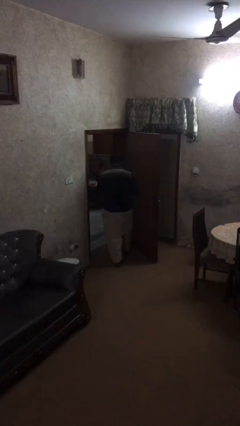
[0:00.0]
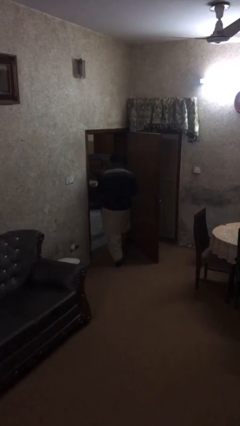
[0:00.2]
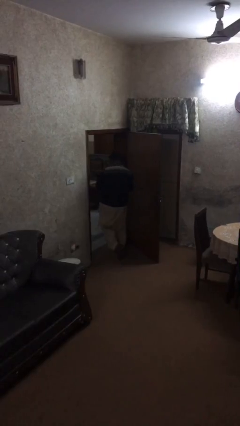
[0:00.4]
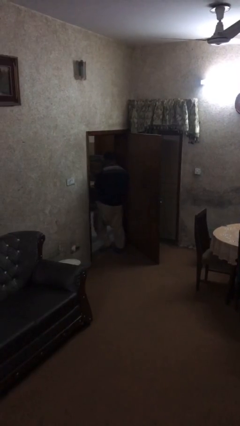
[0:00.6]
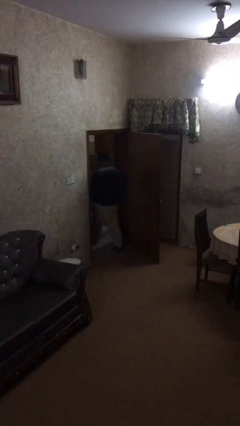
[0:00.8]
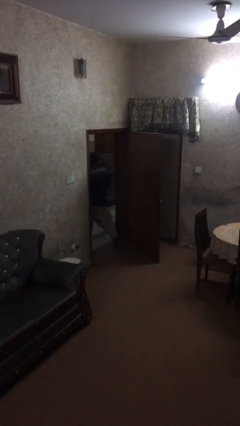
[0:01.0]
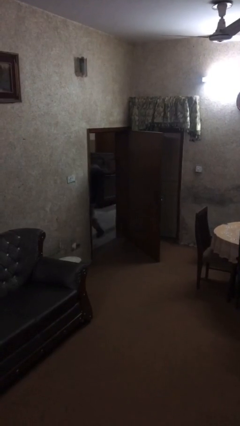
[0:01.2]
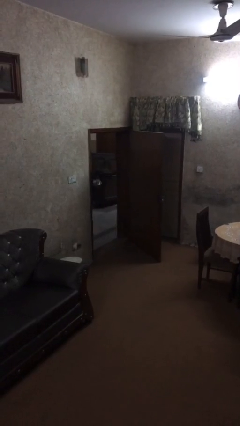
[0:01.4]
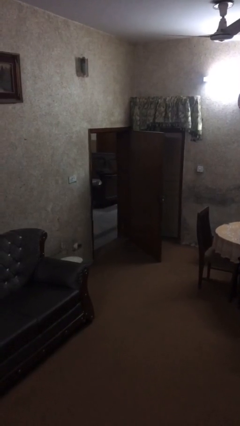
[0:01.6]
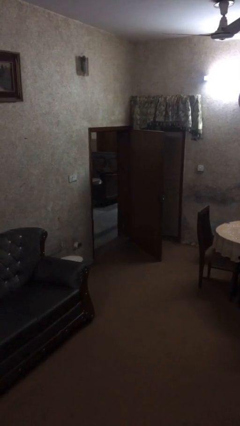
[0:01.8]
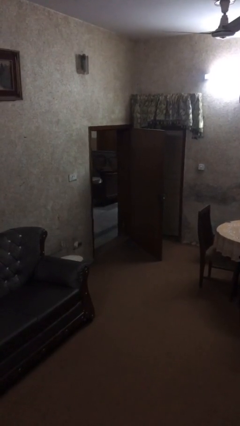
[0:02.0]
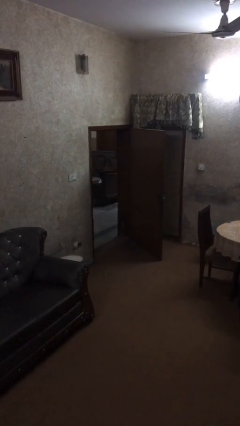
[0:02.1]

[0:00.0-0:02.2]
person exits scene through structure

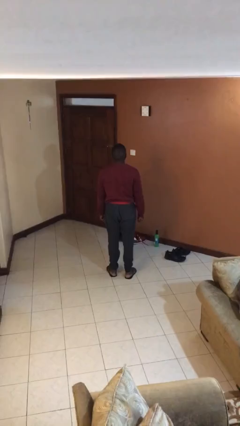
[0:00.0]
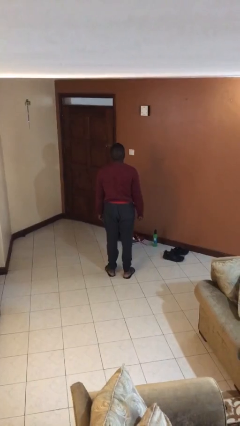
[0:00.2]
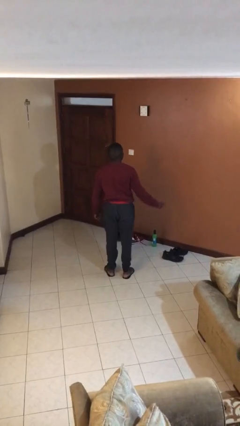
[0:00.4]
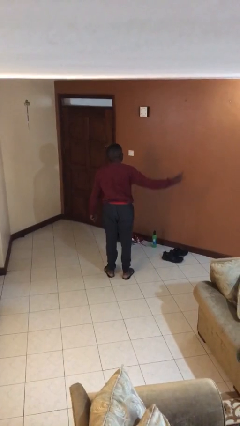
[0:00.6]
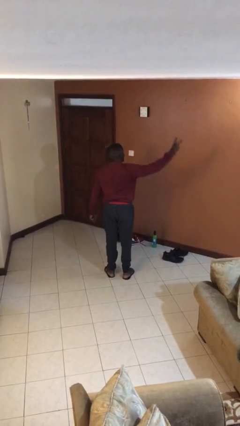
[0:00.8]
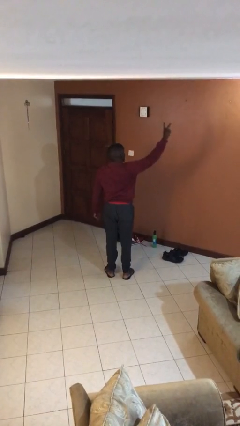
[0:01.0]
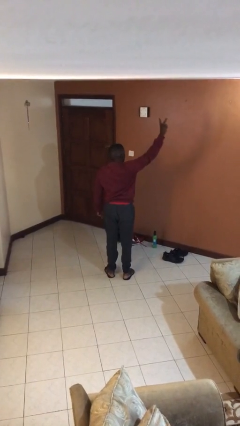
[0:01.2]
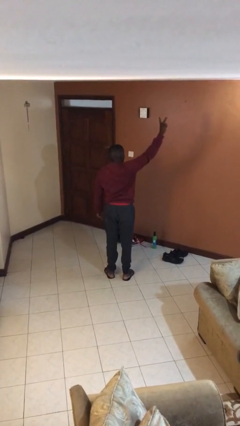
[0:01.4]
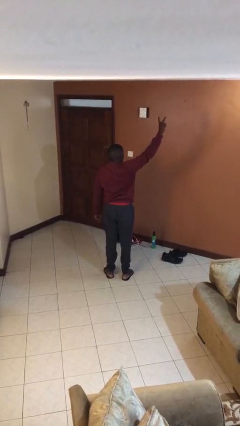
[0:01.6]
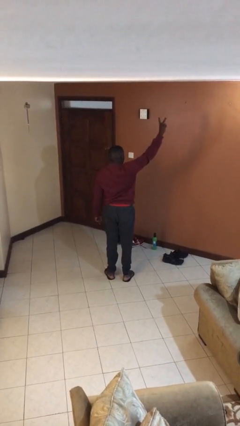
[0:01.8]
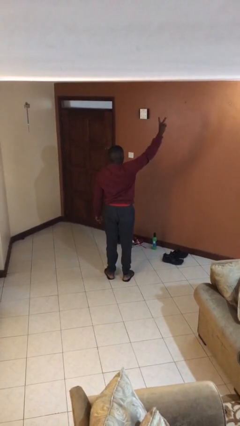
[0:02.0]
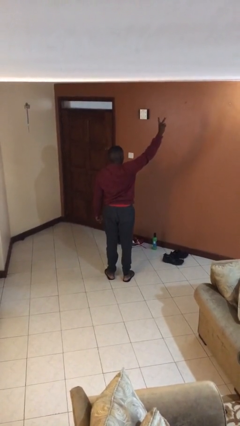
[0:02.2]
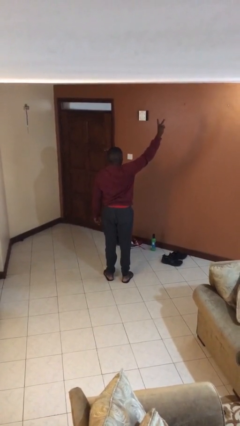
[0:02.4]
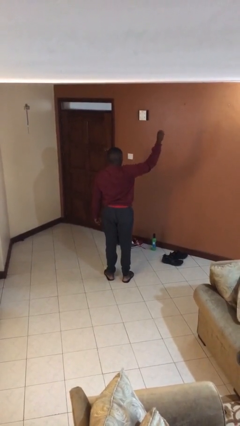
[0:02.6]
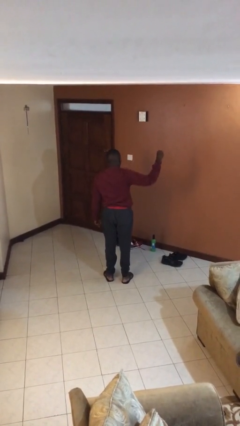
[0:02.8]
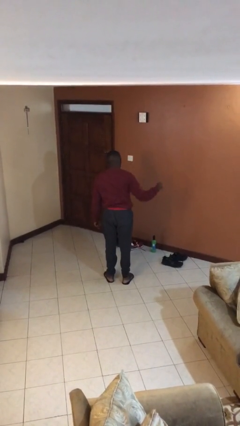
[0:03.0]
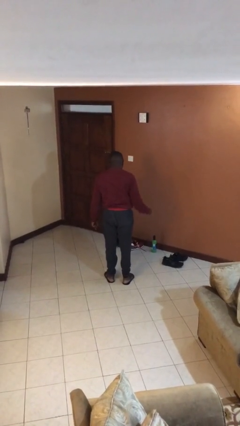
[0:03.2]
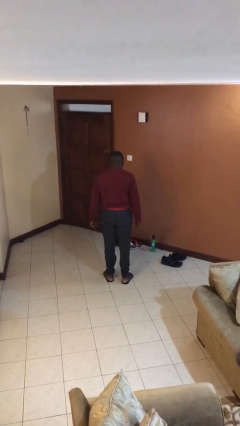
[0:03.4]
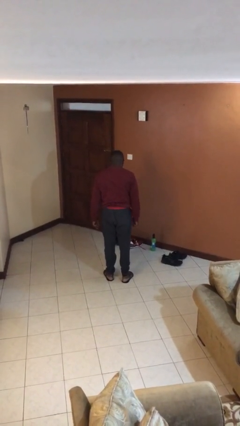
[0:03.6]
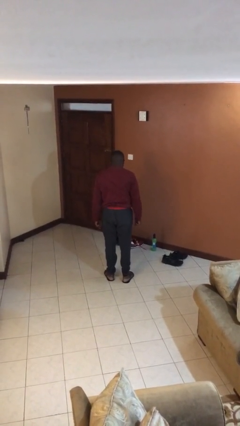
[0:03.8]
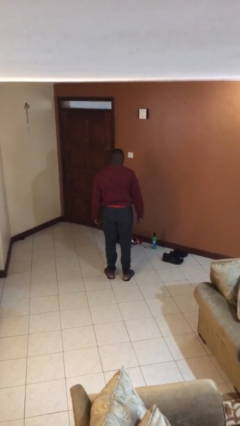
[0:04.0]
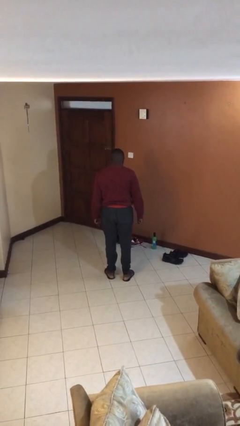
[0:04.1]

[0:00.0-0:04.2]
person gestures peace

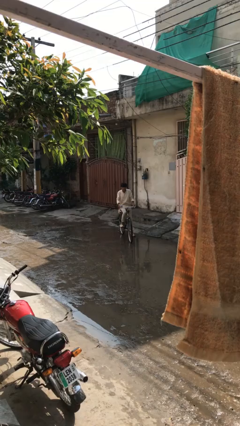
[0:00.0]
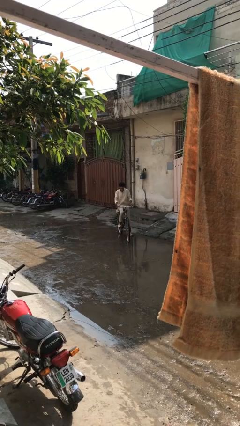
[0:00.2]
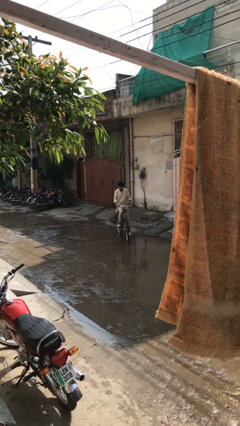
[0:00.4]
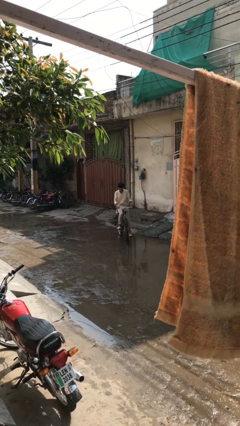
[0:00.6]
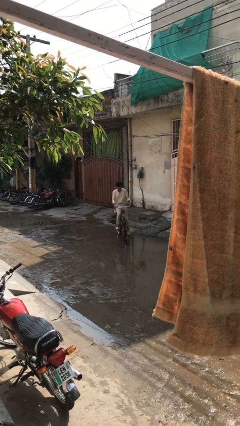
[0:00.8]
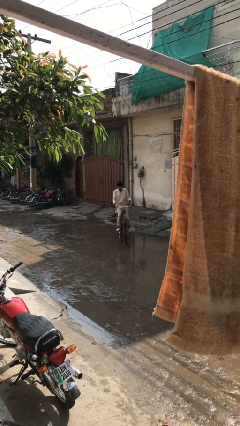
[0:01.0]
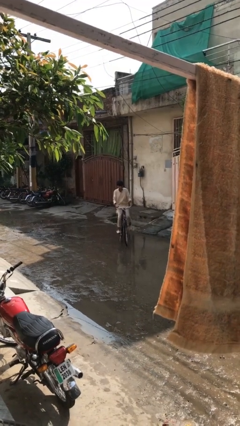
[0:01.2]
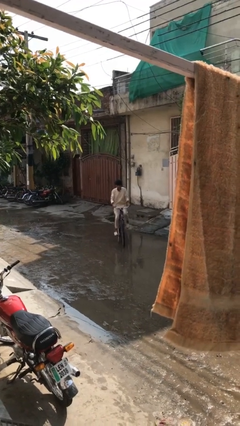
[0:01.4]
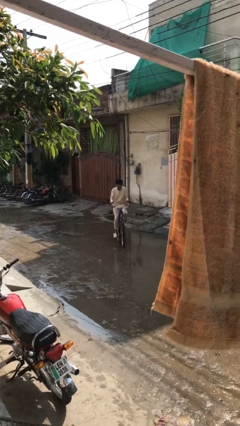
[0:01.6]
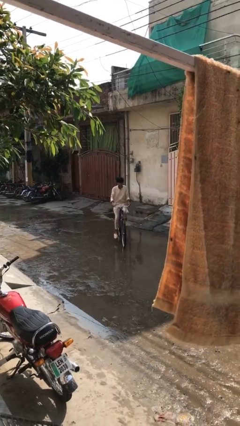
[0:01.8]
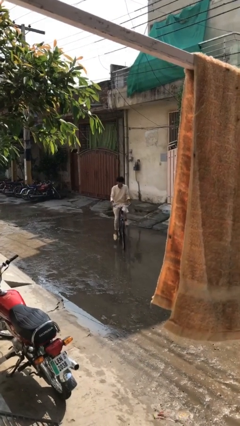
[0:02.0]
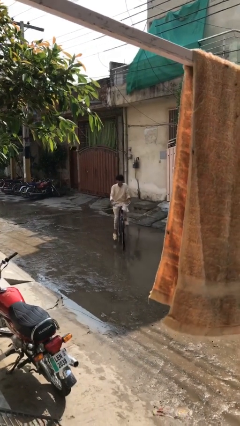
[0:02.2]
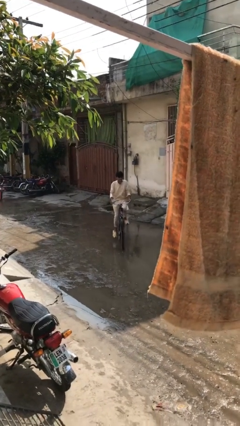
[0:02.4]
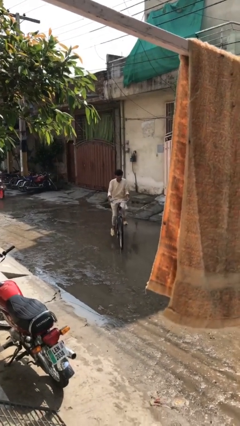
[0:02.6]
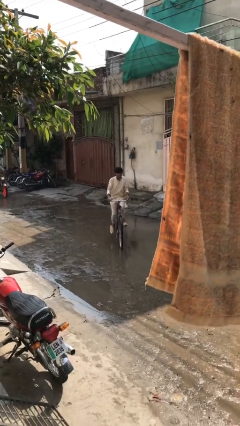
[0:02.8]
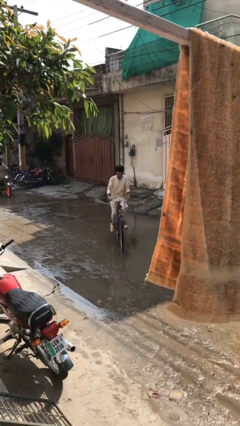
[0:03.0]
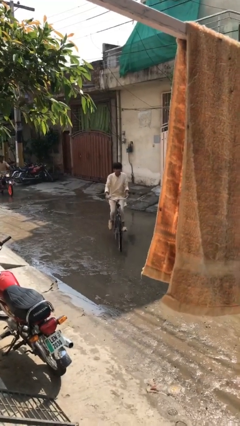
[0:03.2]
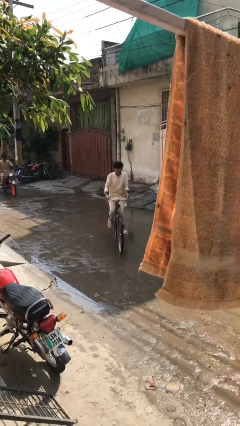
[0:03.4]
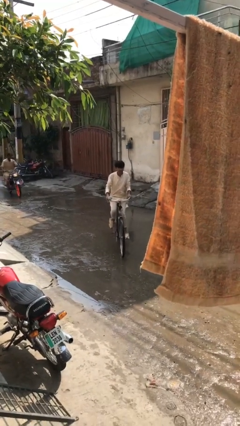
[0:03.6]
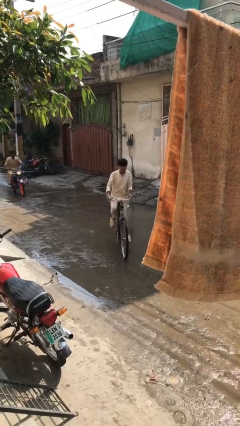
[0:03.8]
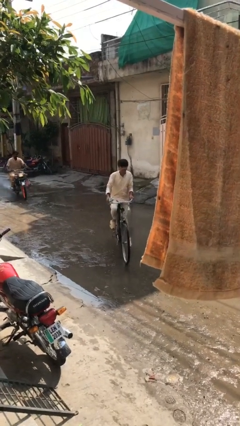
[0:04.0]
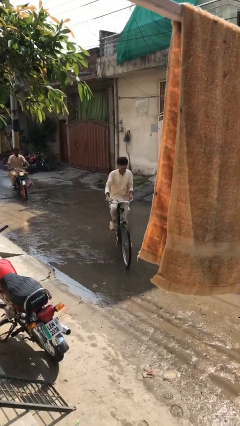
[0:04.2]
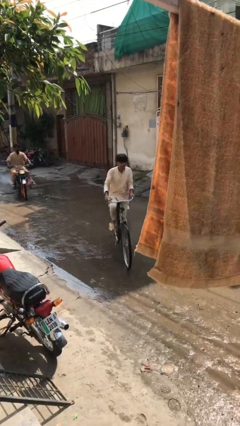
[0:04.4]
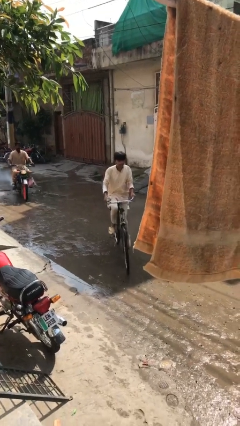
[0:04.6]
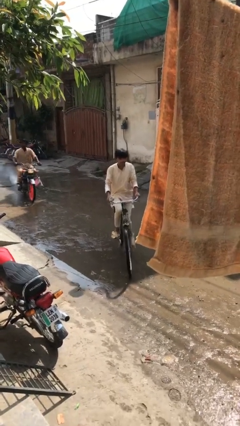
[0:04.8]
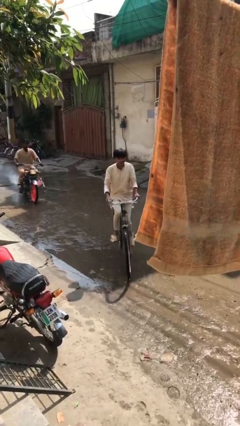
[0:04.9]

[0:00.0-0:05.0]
person rides bicycle

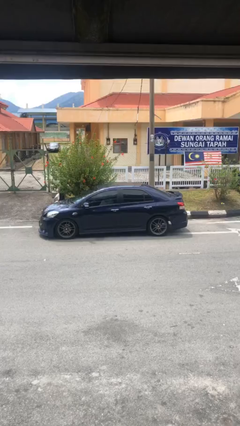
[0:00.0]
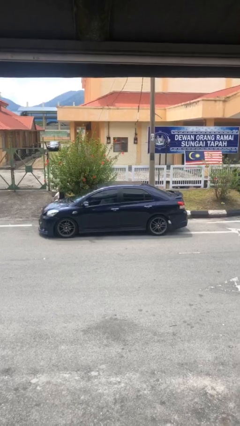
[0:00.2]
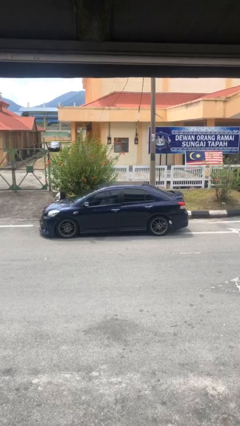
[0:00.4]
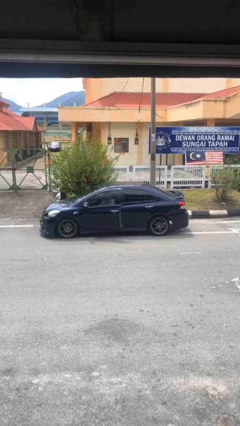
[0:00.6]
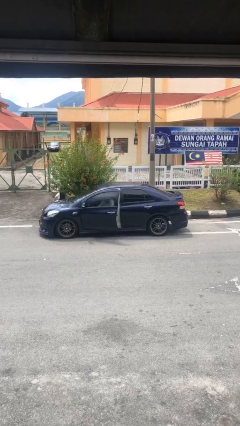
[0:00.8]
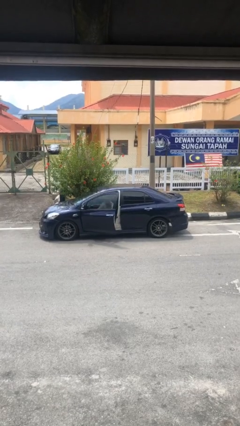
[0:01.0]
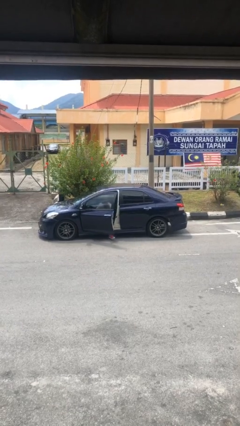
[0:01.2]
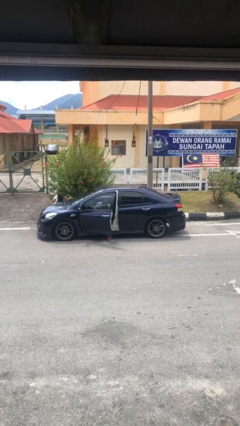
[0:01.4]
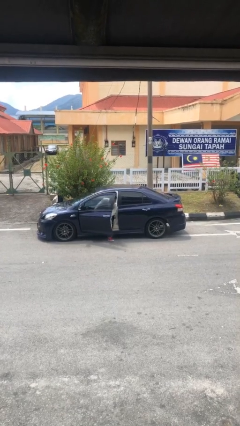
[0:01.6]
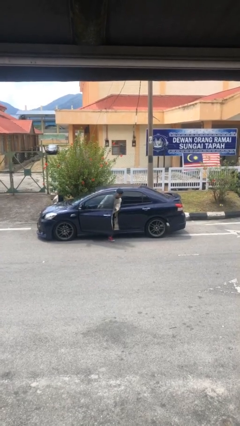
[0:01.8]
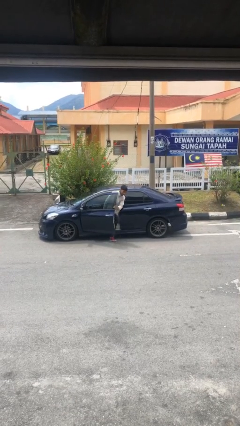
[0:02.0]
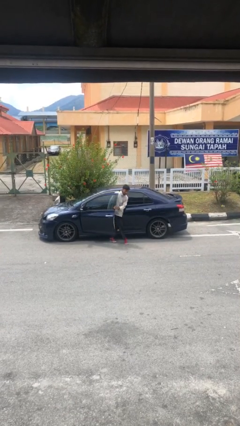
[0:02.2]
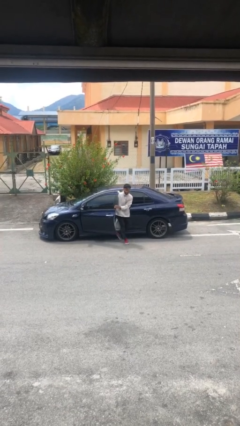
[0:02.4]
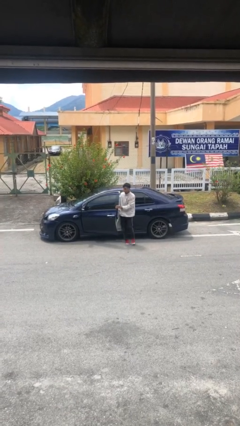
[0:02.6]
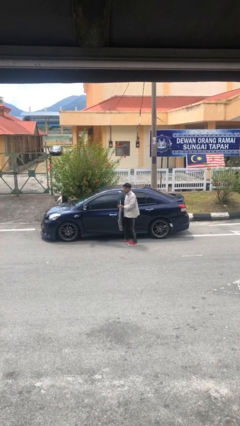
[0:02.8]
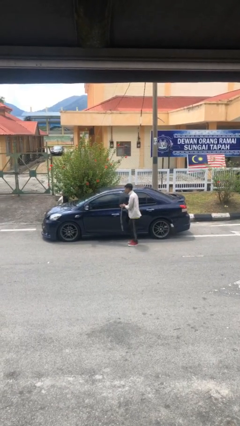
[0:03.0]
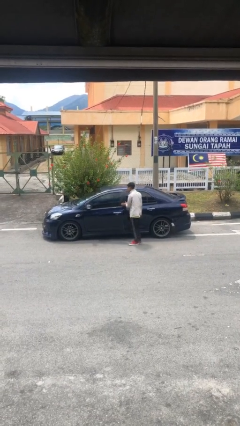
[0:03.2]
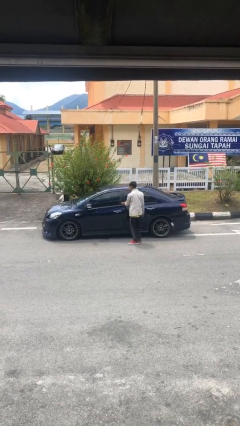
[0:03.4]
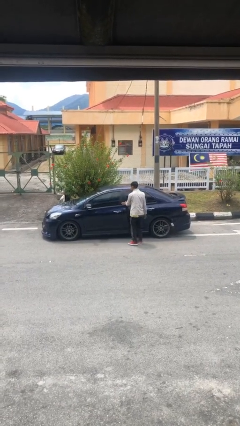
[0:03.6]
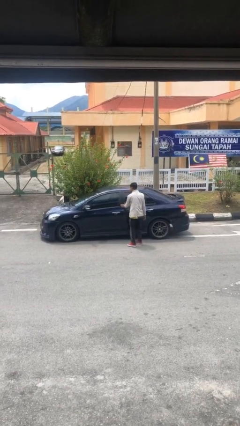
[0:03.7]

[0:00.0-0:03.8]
car drops off person

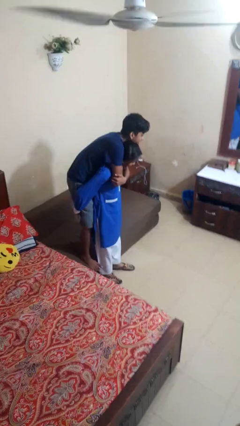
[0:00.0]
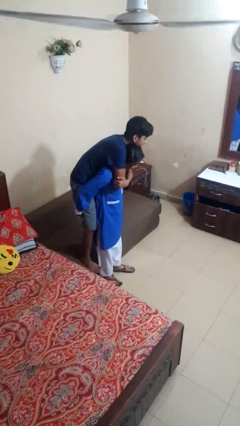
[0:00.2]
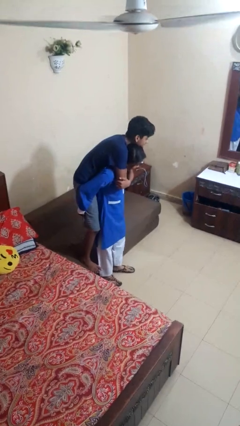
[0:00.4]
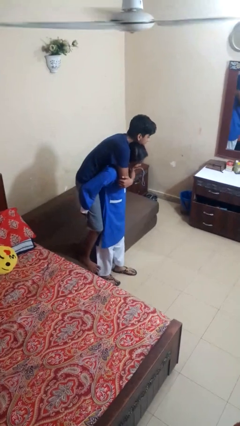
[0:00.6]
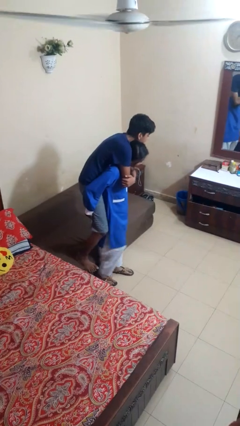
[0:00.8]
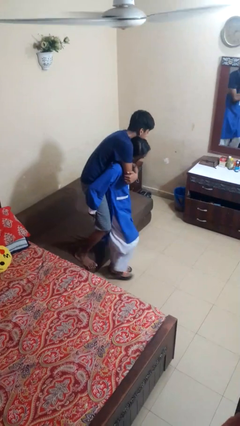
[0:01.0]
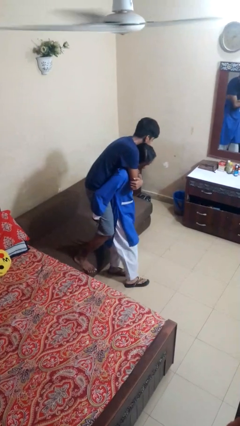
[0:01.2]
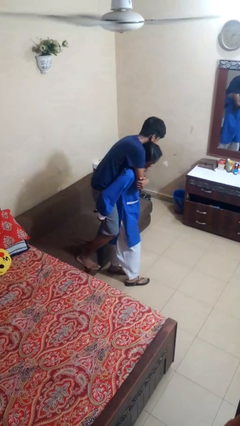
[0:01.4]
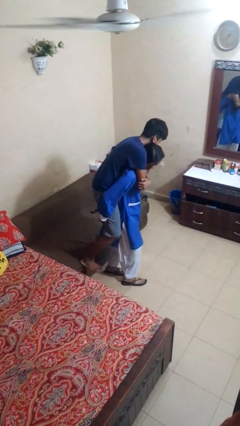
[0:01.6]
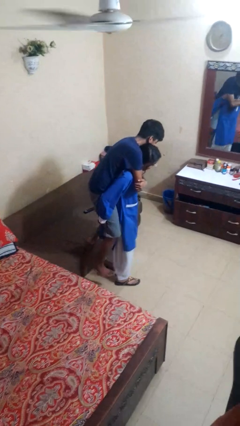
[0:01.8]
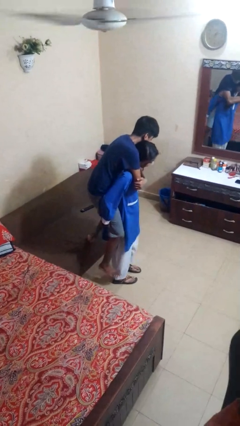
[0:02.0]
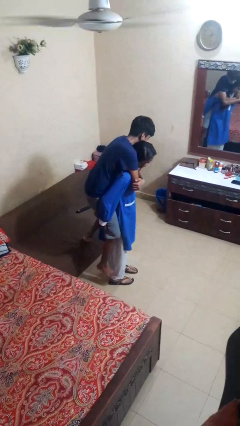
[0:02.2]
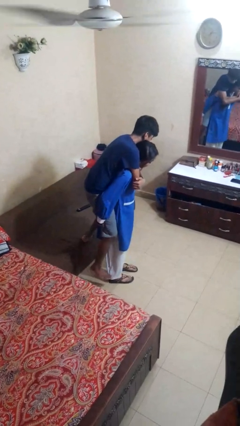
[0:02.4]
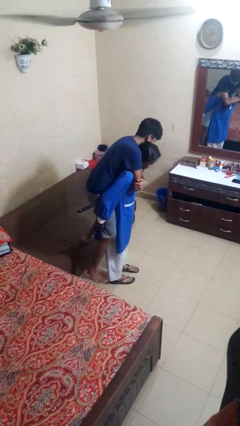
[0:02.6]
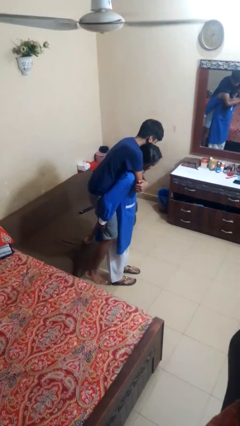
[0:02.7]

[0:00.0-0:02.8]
person carries person on back
